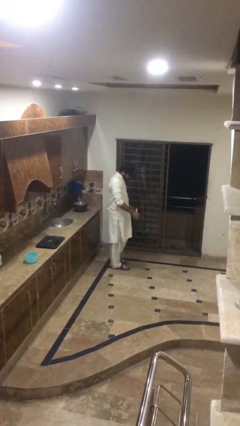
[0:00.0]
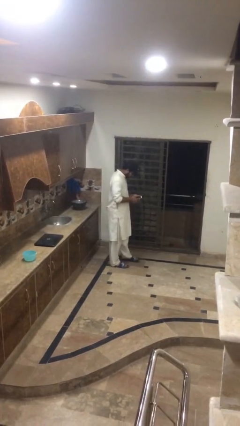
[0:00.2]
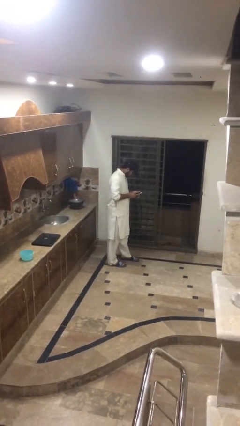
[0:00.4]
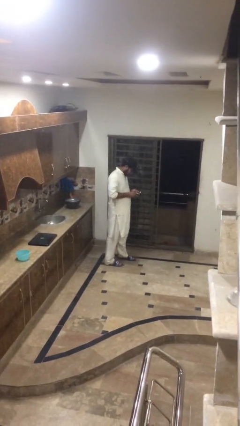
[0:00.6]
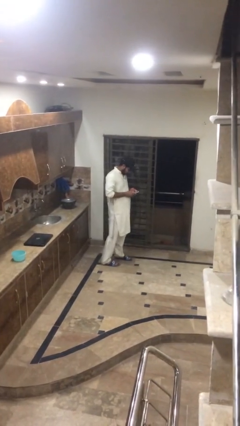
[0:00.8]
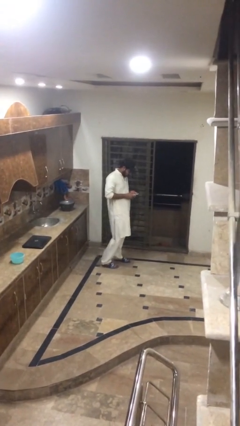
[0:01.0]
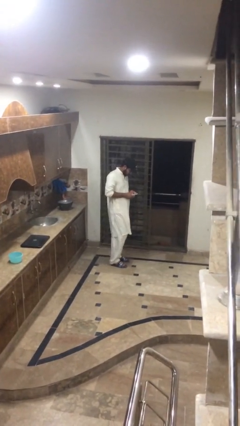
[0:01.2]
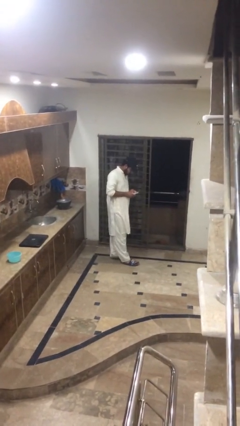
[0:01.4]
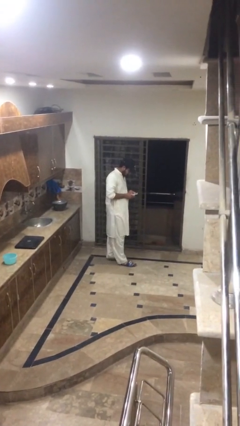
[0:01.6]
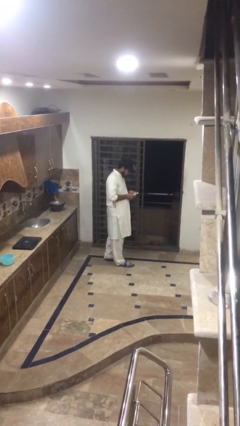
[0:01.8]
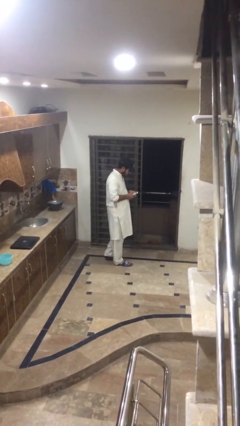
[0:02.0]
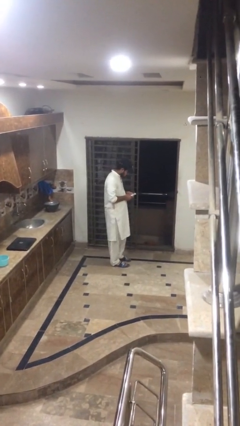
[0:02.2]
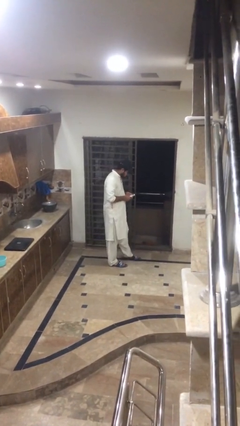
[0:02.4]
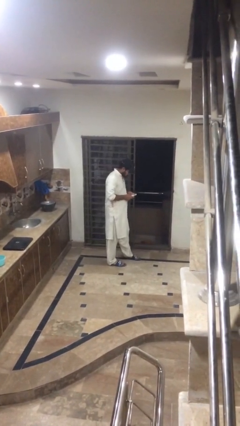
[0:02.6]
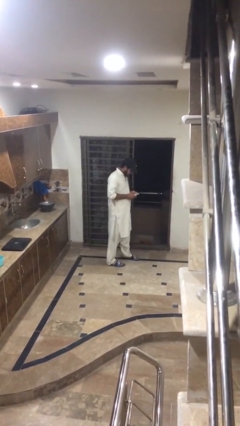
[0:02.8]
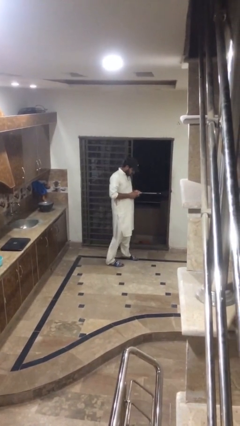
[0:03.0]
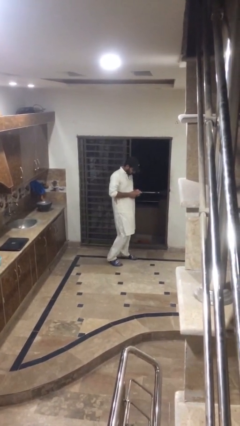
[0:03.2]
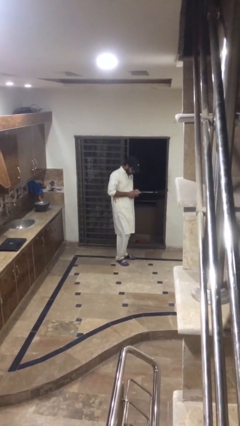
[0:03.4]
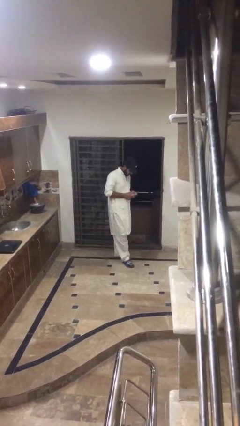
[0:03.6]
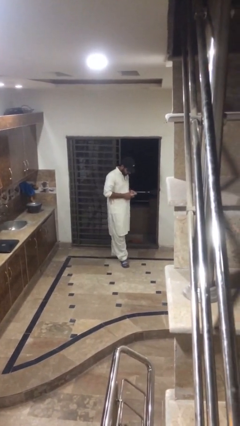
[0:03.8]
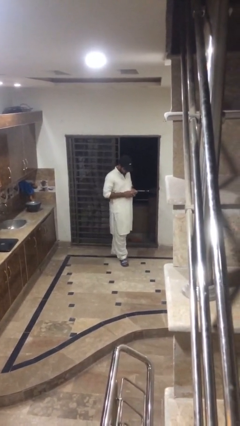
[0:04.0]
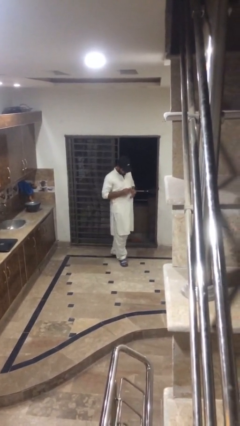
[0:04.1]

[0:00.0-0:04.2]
person texts on phone

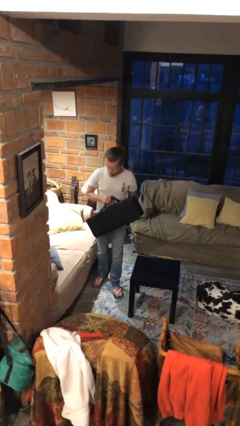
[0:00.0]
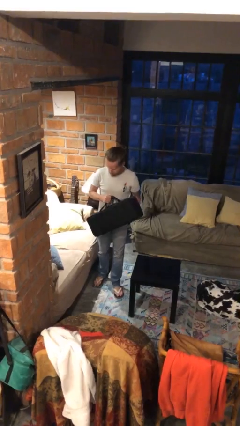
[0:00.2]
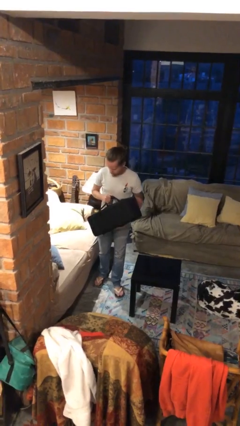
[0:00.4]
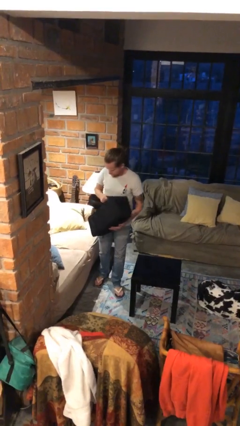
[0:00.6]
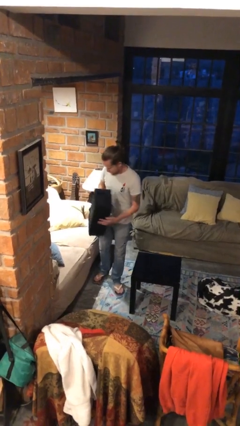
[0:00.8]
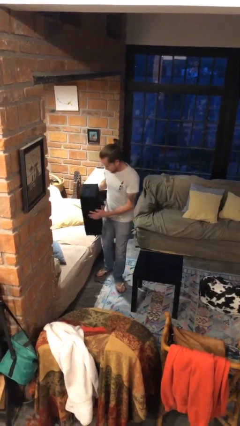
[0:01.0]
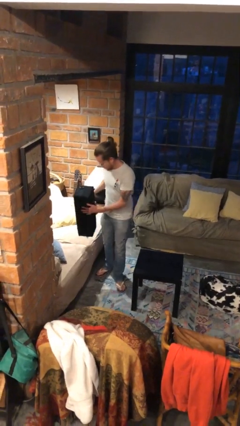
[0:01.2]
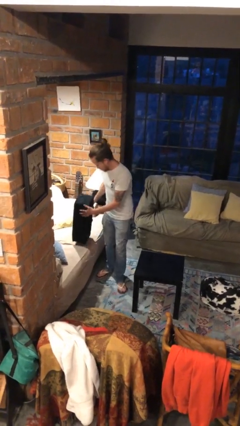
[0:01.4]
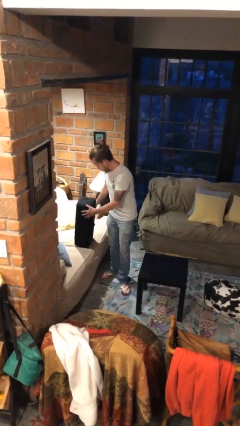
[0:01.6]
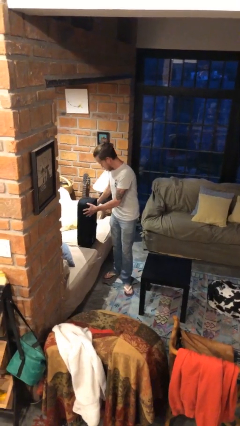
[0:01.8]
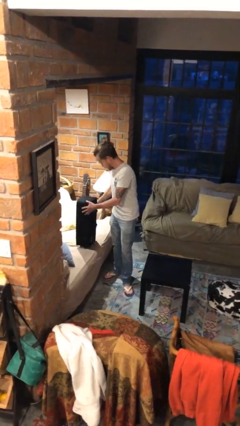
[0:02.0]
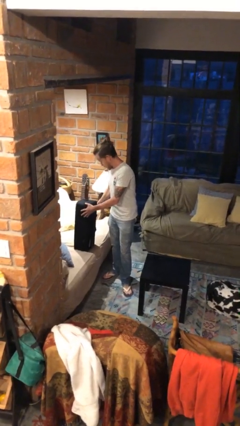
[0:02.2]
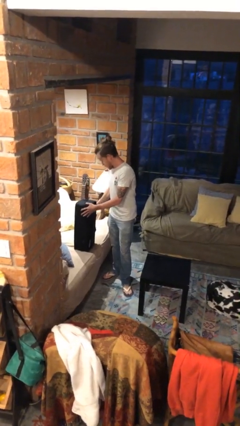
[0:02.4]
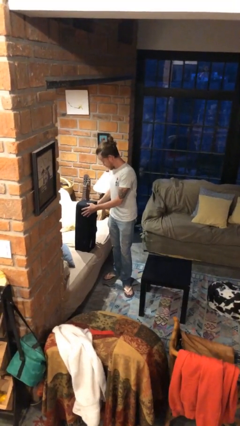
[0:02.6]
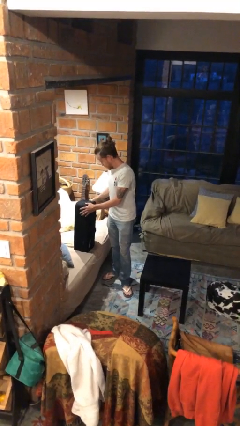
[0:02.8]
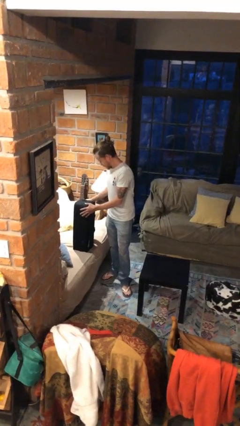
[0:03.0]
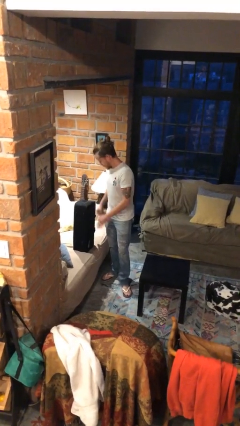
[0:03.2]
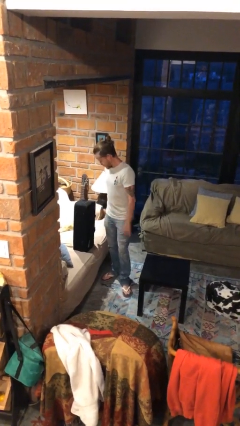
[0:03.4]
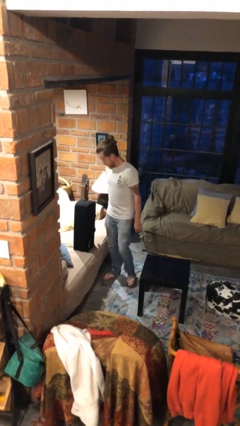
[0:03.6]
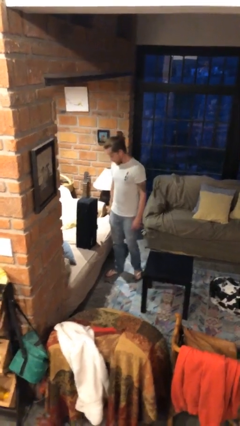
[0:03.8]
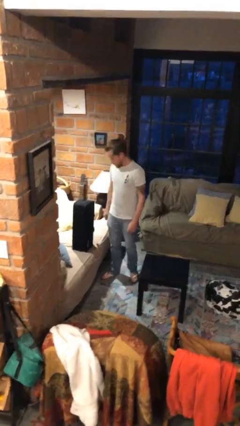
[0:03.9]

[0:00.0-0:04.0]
person puts down object on couch

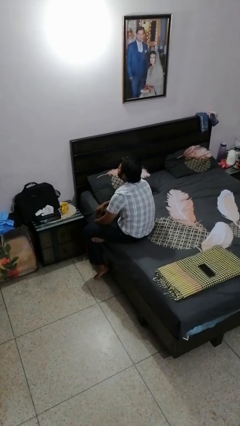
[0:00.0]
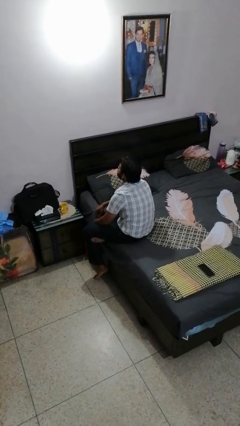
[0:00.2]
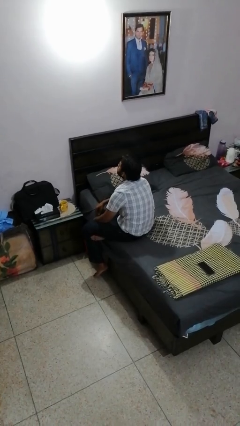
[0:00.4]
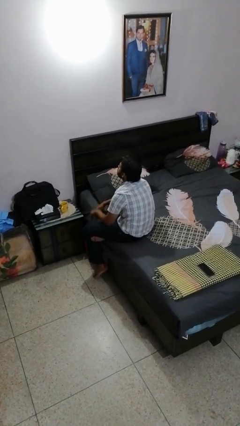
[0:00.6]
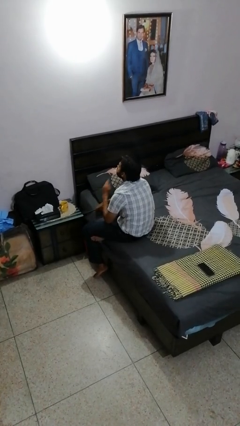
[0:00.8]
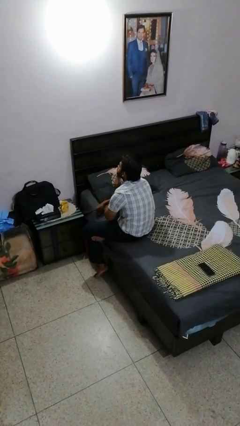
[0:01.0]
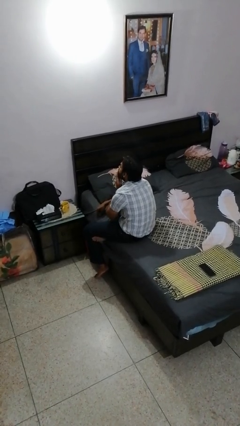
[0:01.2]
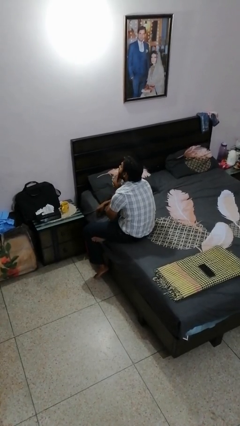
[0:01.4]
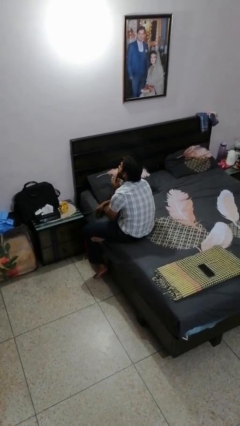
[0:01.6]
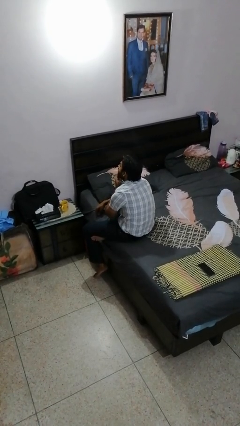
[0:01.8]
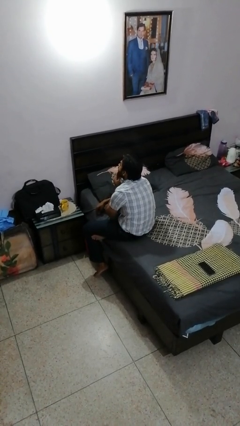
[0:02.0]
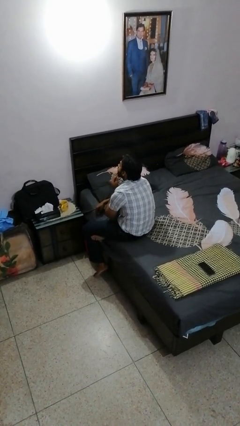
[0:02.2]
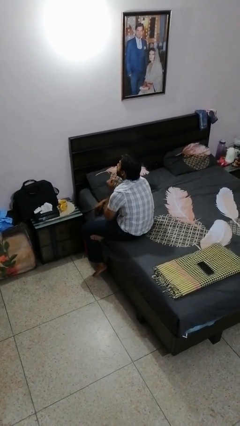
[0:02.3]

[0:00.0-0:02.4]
person strokes chin

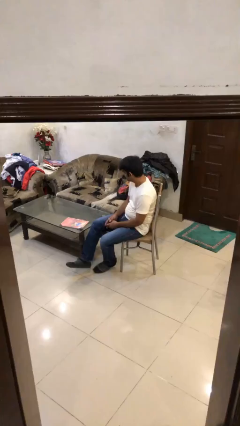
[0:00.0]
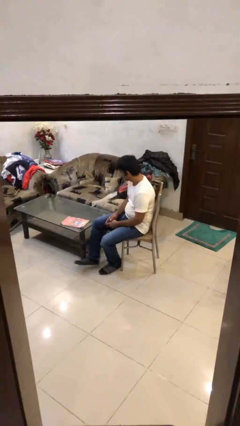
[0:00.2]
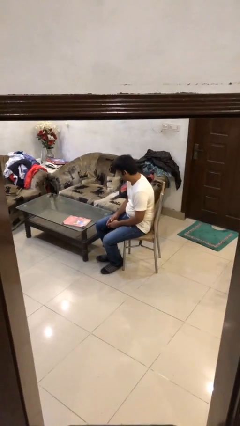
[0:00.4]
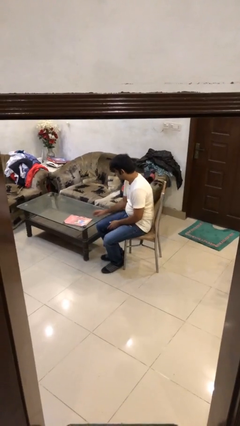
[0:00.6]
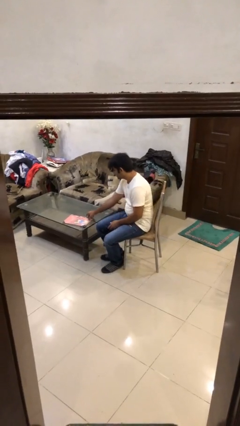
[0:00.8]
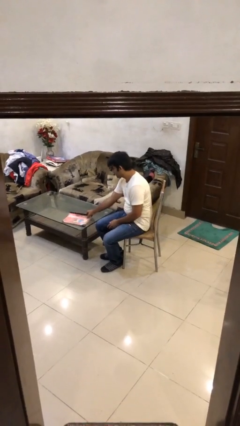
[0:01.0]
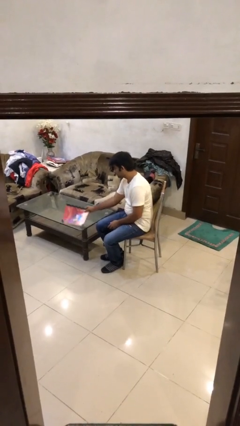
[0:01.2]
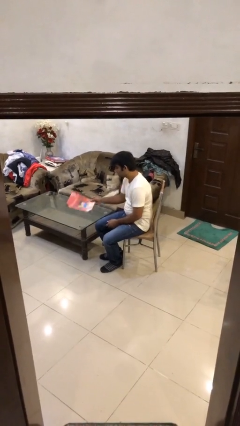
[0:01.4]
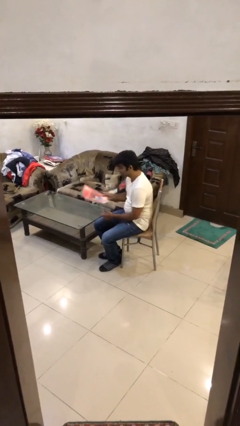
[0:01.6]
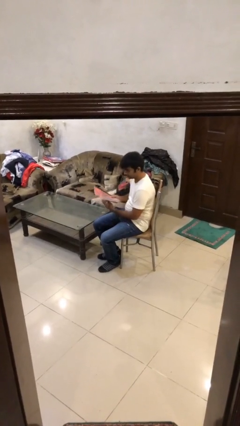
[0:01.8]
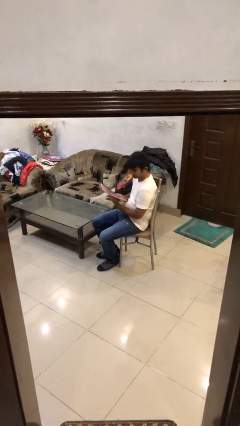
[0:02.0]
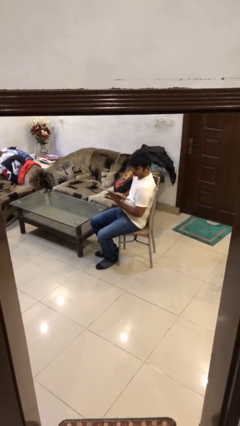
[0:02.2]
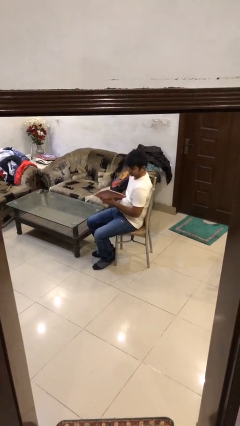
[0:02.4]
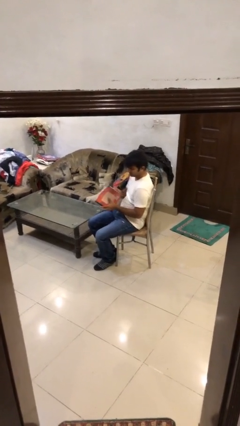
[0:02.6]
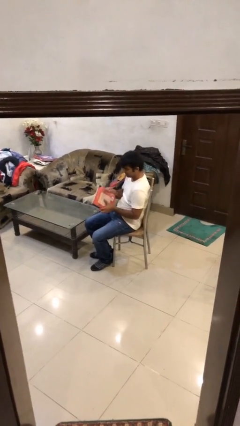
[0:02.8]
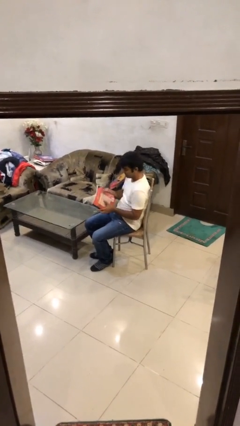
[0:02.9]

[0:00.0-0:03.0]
person picks up object from table

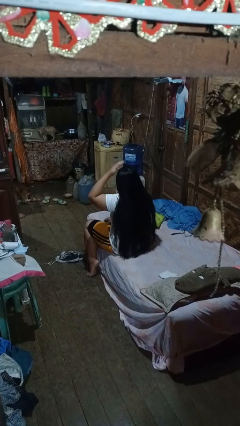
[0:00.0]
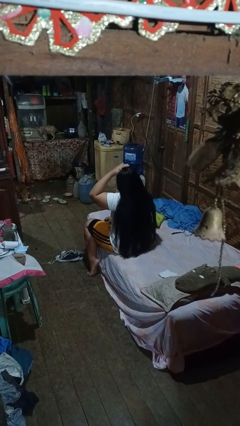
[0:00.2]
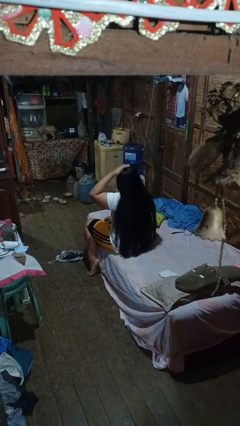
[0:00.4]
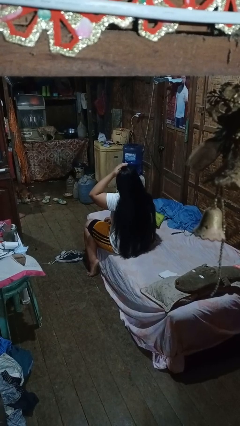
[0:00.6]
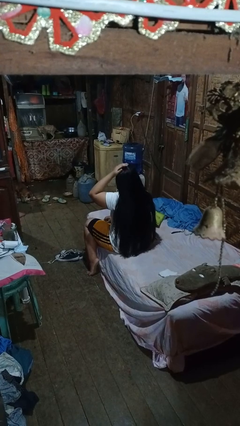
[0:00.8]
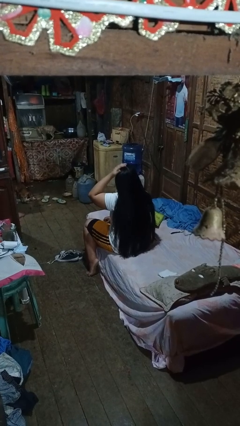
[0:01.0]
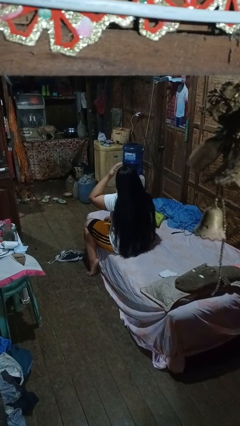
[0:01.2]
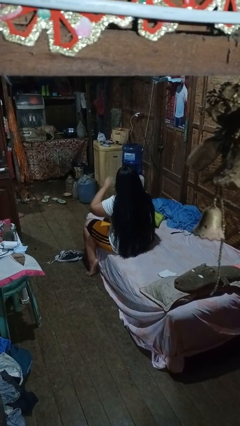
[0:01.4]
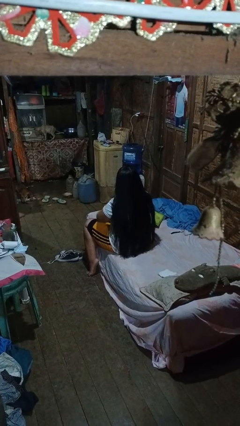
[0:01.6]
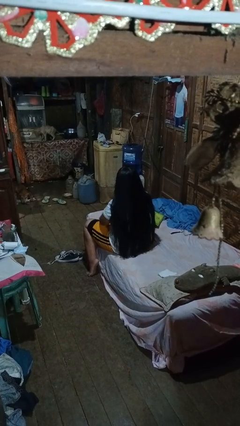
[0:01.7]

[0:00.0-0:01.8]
person pats head

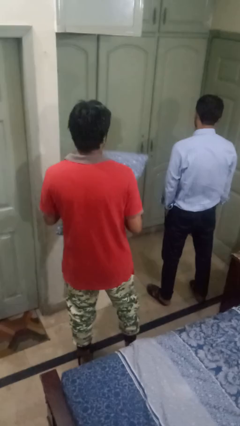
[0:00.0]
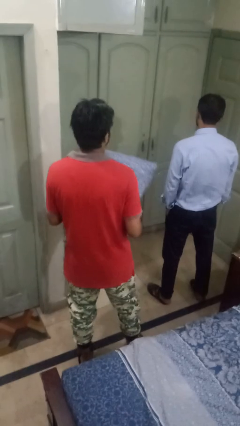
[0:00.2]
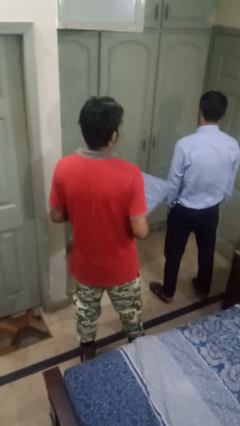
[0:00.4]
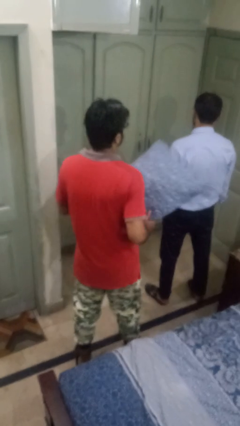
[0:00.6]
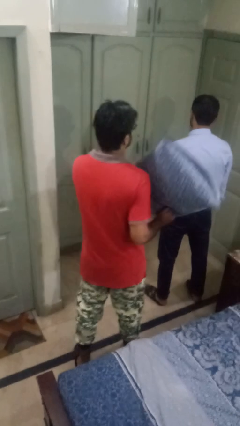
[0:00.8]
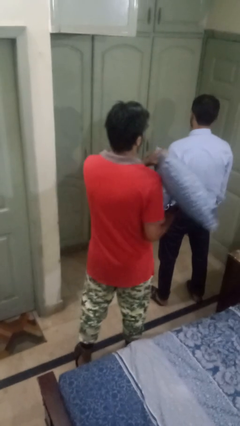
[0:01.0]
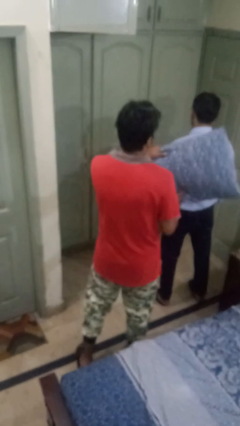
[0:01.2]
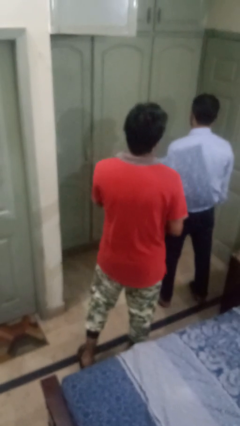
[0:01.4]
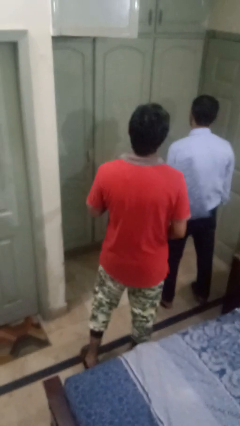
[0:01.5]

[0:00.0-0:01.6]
person hits person with pillow

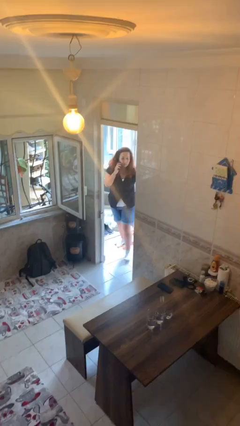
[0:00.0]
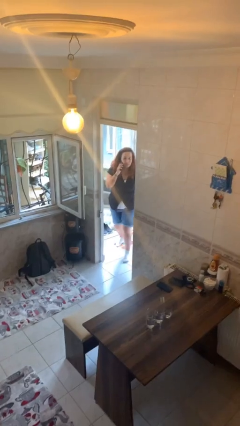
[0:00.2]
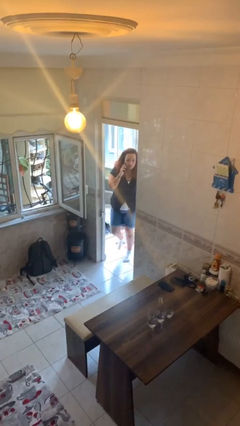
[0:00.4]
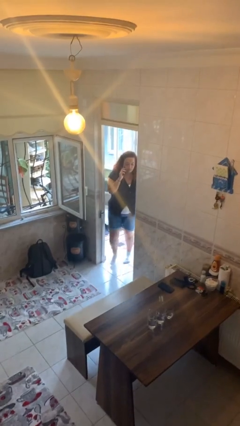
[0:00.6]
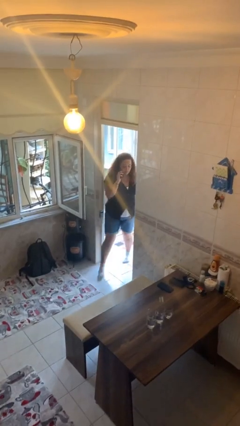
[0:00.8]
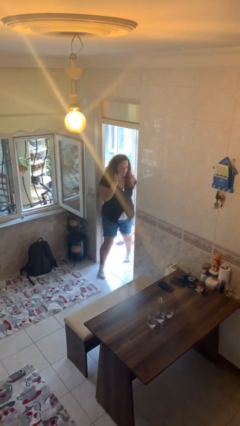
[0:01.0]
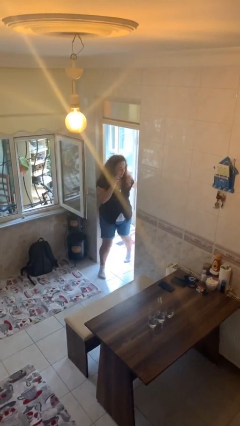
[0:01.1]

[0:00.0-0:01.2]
person enters scene through structure
